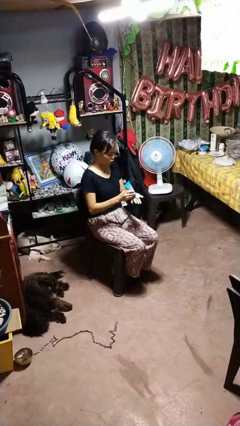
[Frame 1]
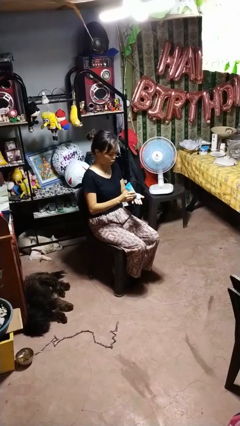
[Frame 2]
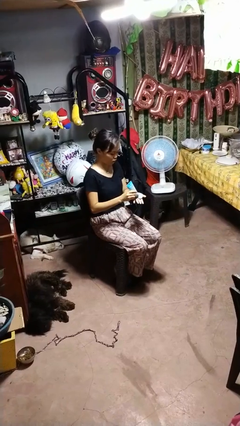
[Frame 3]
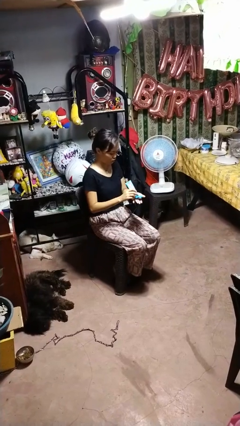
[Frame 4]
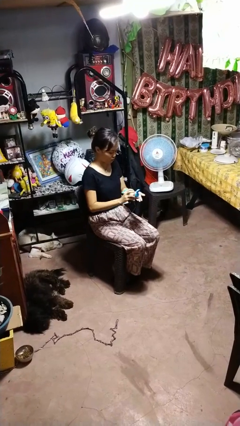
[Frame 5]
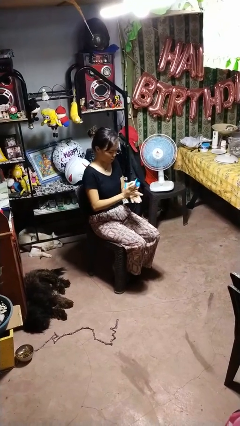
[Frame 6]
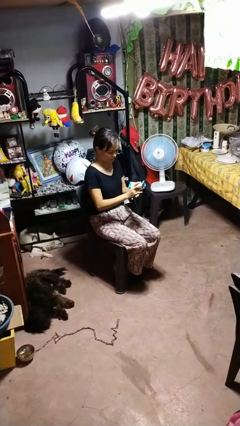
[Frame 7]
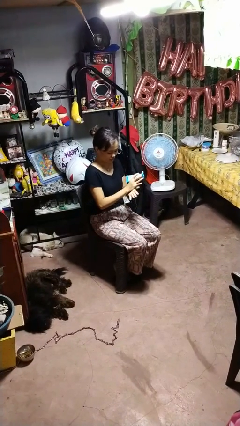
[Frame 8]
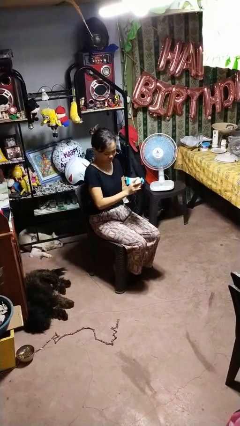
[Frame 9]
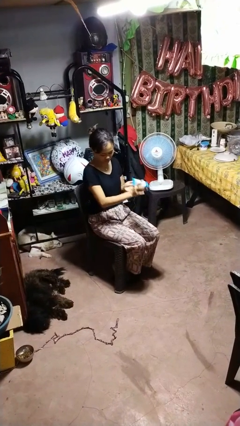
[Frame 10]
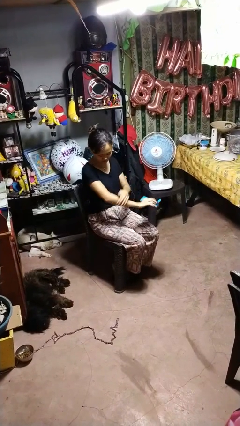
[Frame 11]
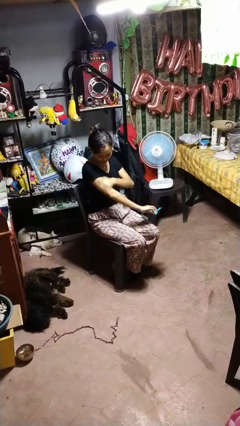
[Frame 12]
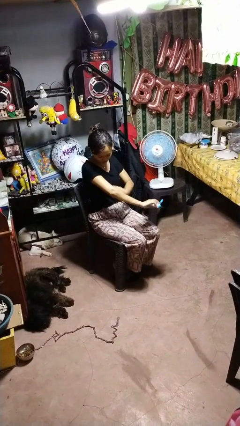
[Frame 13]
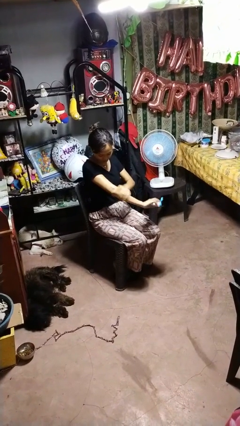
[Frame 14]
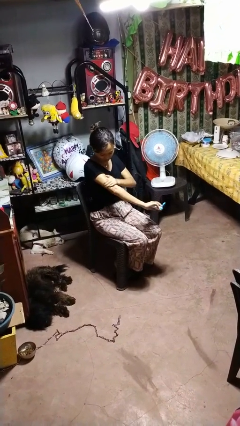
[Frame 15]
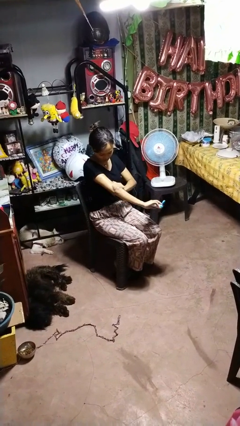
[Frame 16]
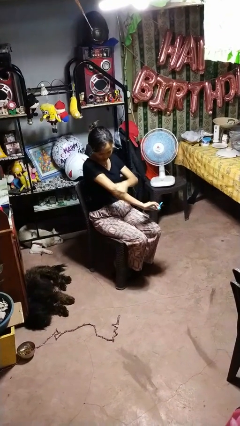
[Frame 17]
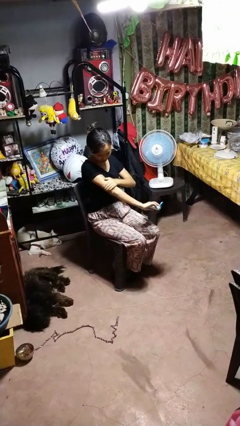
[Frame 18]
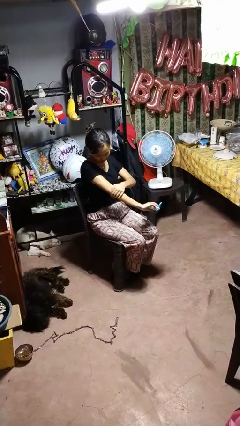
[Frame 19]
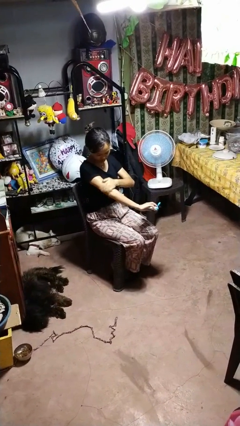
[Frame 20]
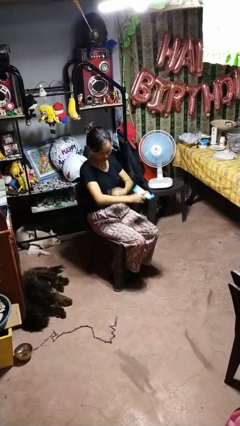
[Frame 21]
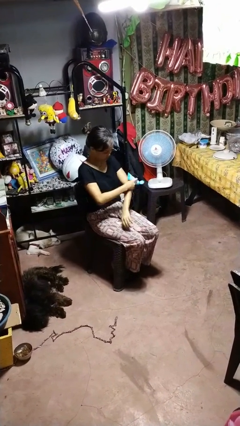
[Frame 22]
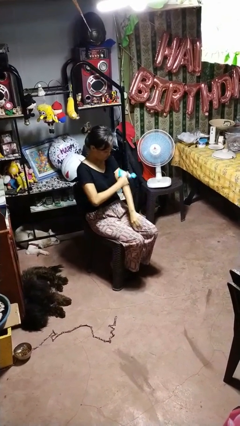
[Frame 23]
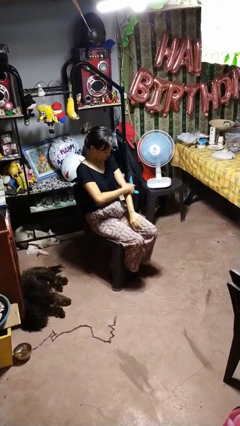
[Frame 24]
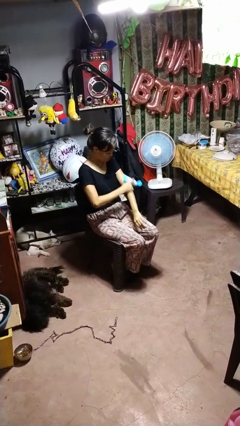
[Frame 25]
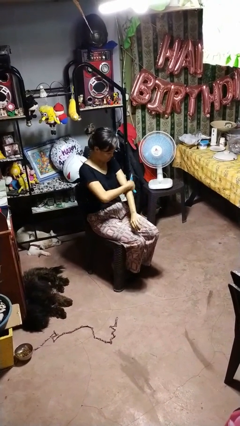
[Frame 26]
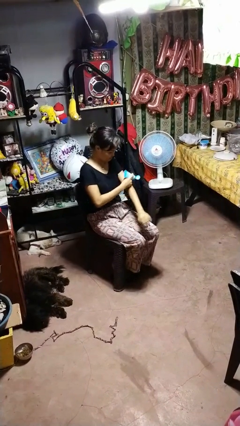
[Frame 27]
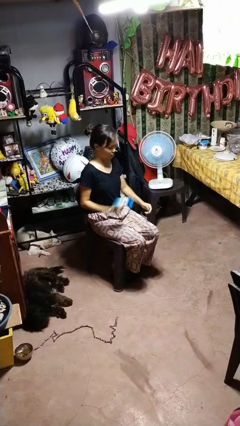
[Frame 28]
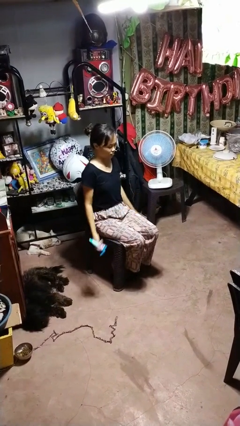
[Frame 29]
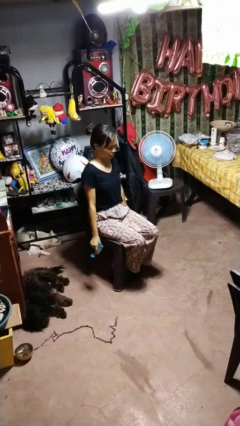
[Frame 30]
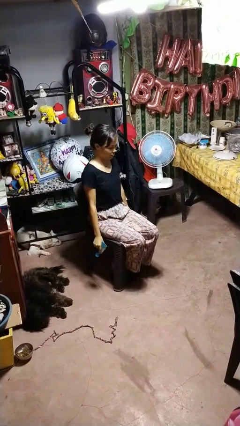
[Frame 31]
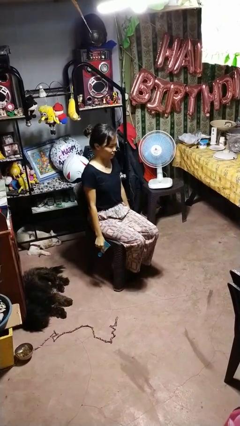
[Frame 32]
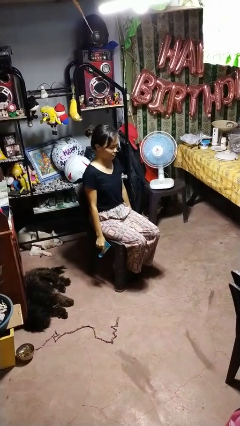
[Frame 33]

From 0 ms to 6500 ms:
person applies sunscreen

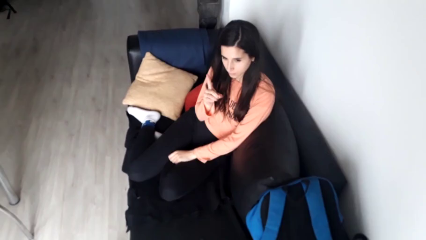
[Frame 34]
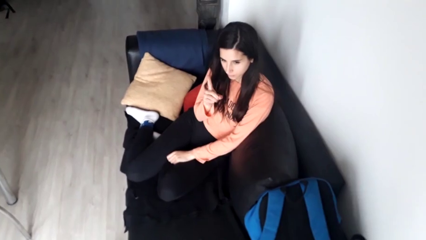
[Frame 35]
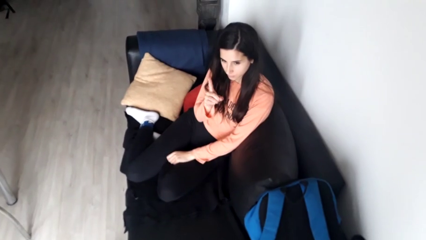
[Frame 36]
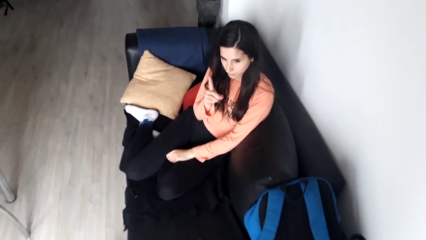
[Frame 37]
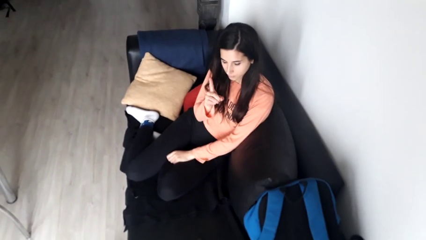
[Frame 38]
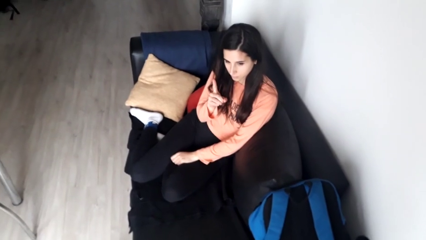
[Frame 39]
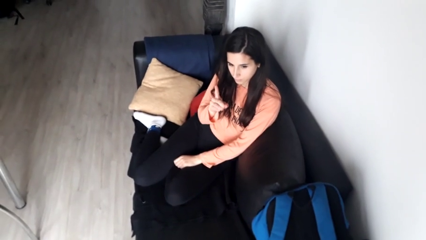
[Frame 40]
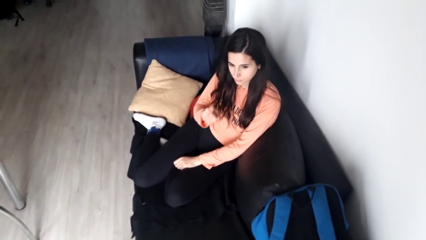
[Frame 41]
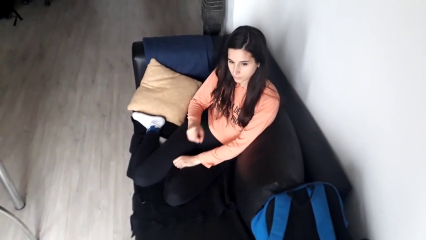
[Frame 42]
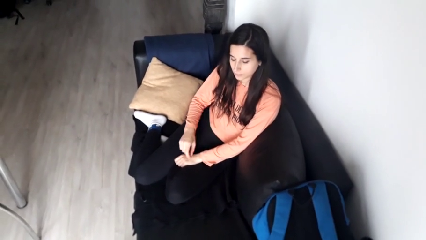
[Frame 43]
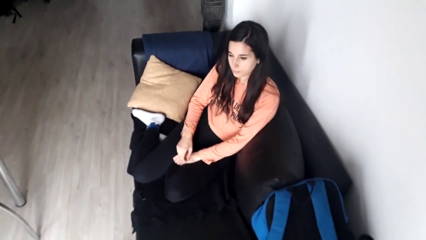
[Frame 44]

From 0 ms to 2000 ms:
person gestures number one

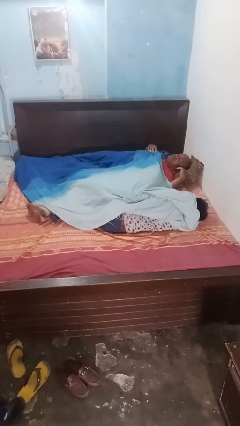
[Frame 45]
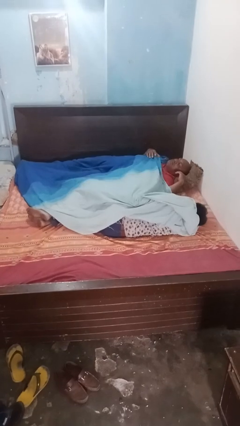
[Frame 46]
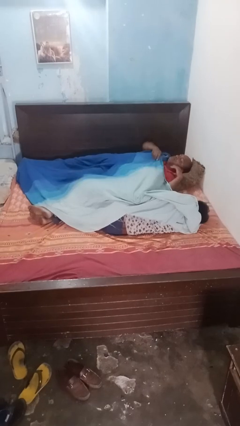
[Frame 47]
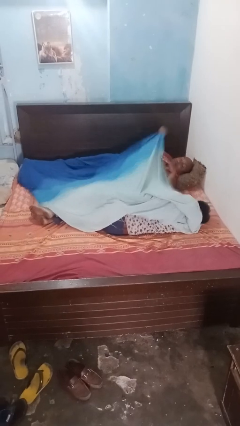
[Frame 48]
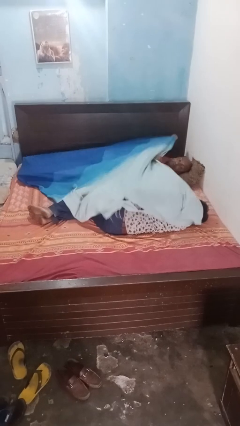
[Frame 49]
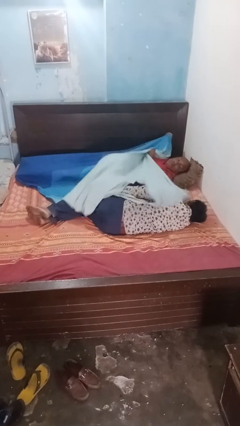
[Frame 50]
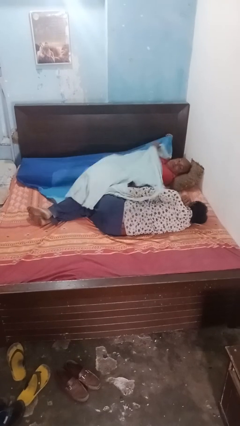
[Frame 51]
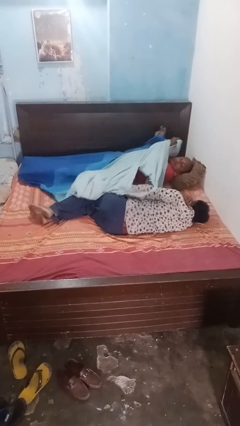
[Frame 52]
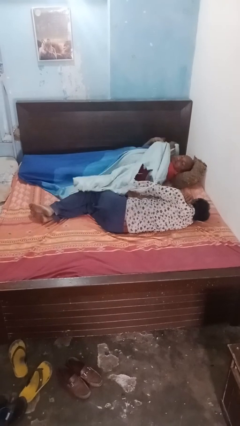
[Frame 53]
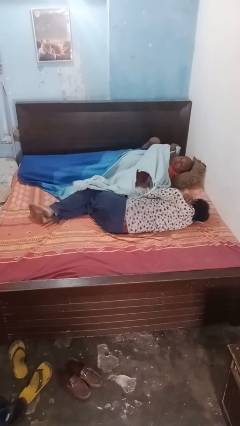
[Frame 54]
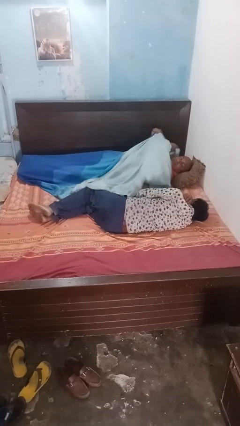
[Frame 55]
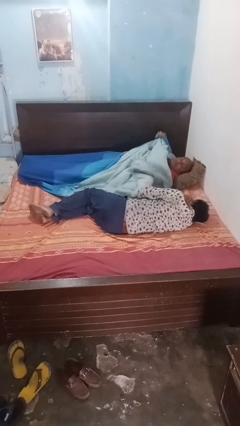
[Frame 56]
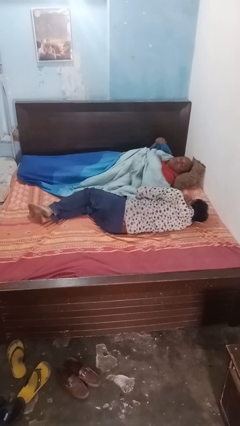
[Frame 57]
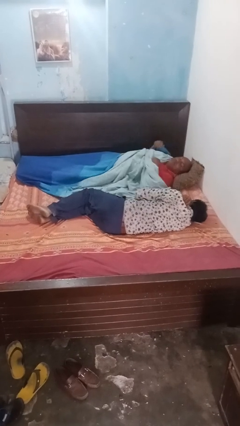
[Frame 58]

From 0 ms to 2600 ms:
person uncovers friend with blanket

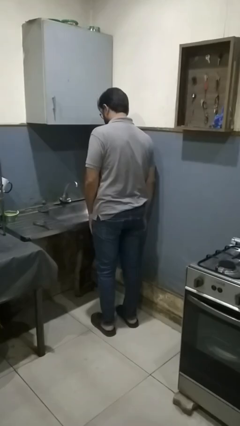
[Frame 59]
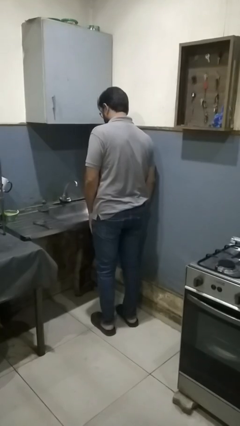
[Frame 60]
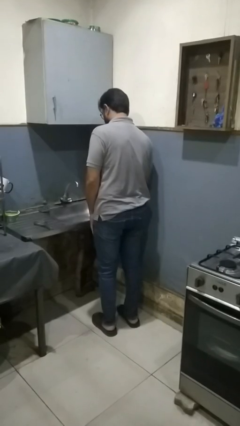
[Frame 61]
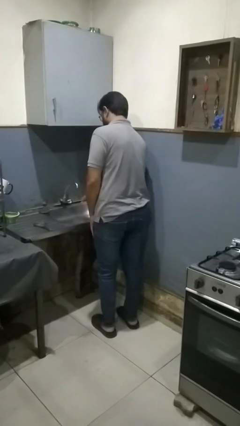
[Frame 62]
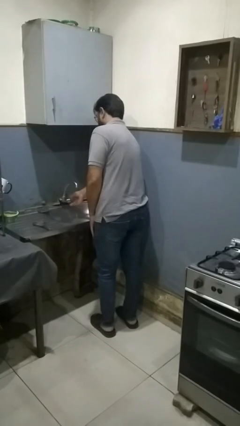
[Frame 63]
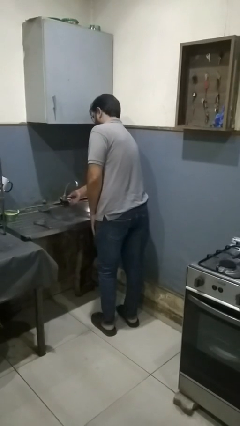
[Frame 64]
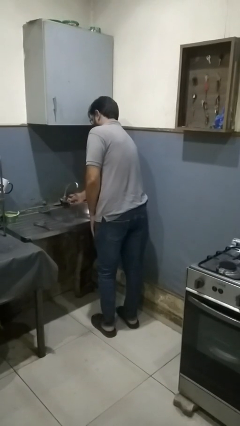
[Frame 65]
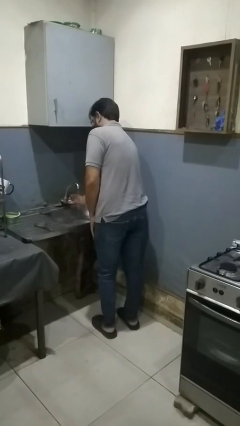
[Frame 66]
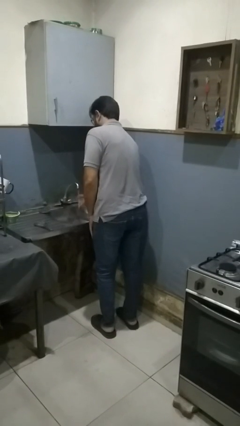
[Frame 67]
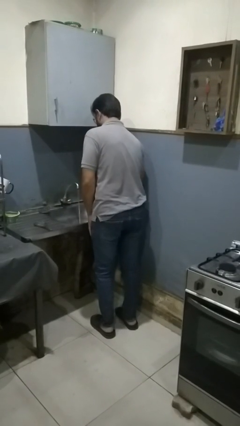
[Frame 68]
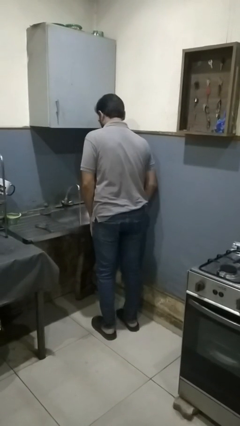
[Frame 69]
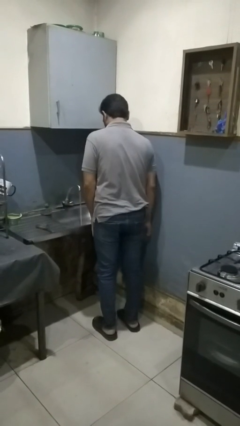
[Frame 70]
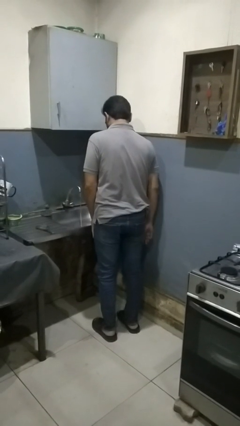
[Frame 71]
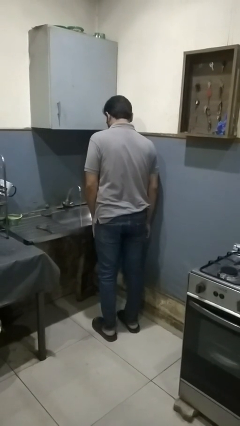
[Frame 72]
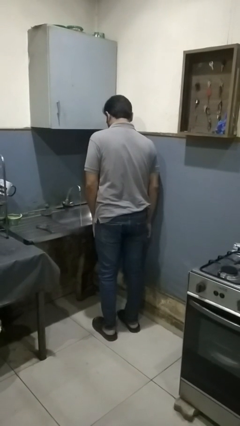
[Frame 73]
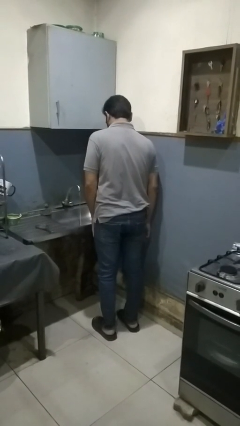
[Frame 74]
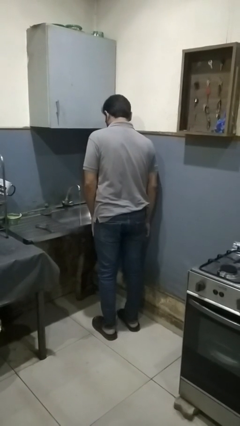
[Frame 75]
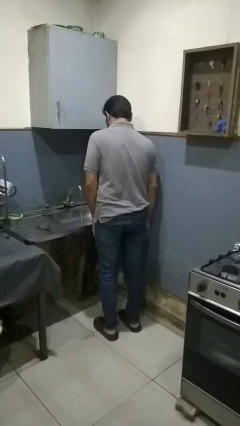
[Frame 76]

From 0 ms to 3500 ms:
person turns on faucet

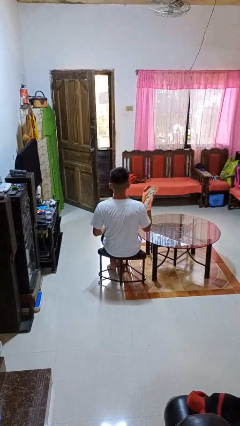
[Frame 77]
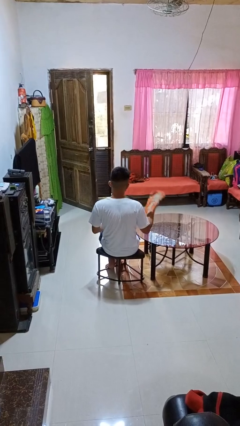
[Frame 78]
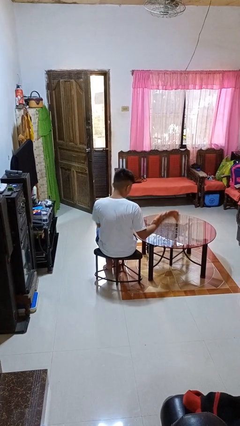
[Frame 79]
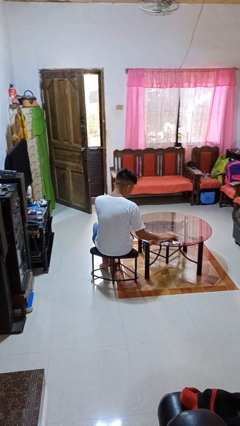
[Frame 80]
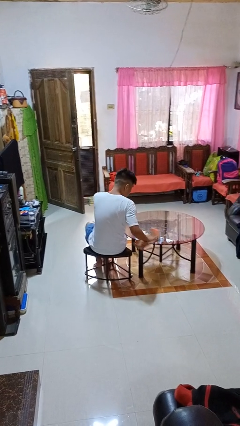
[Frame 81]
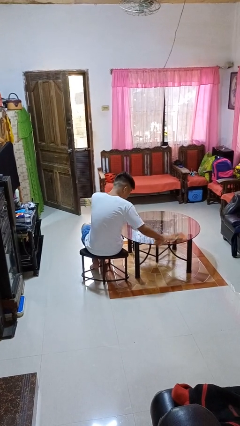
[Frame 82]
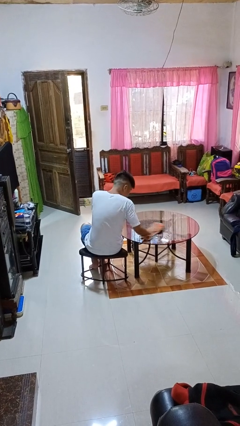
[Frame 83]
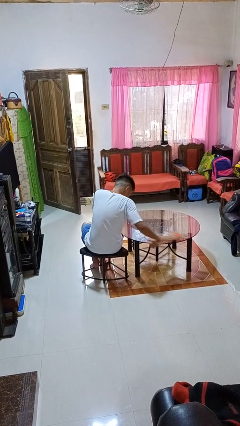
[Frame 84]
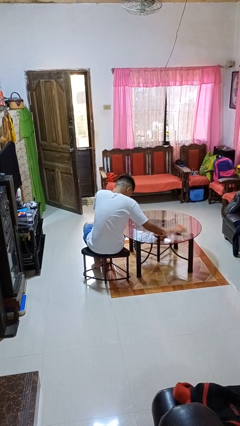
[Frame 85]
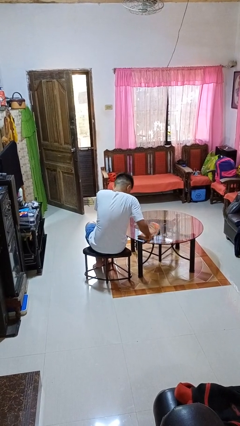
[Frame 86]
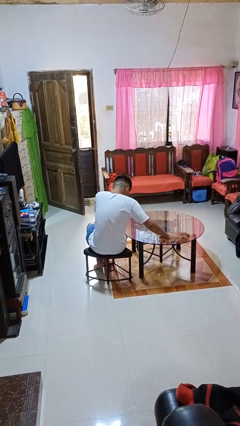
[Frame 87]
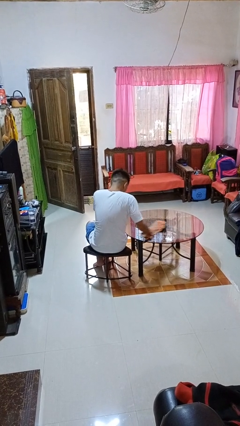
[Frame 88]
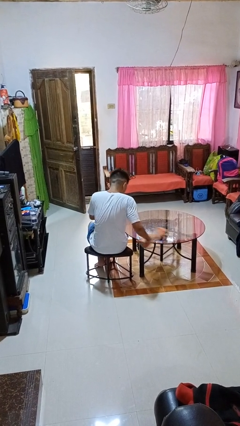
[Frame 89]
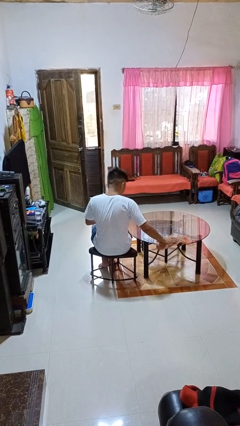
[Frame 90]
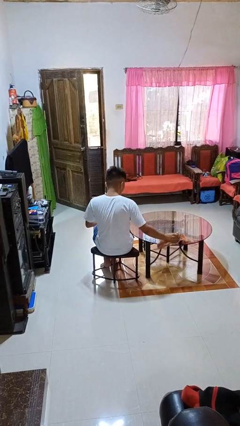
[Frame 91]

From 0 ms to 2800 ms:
person cleans table with rag

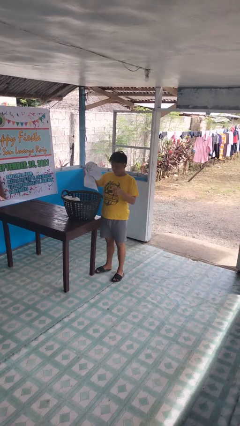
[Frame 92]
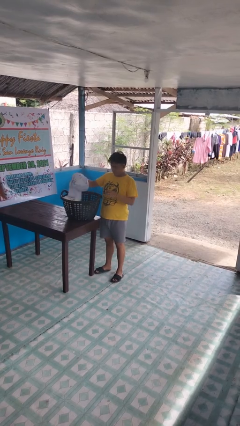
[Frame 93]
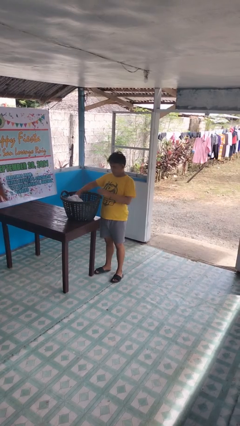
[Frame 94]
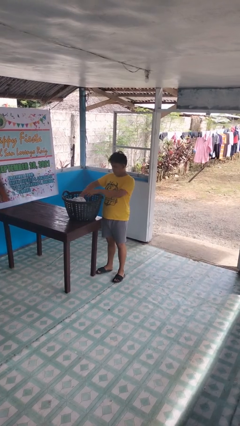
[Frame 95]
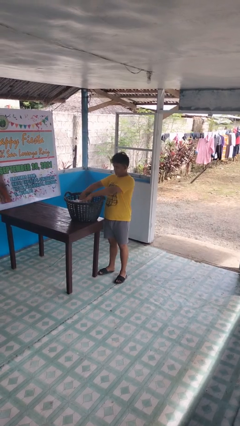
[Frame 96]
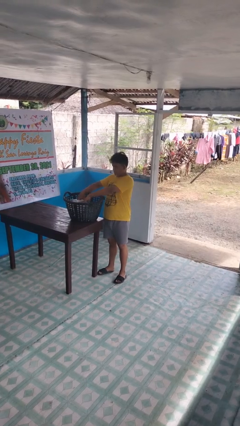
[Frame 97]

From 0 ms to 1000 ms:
person puts object into basket
